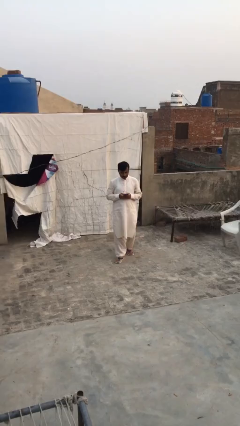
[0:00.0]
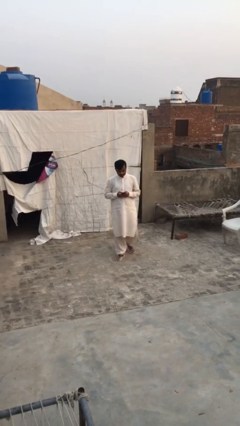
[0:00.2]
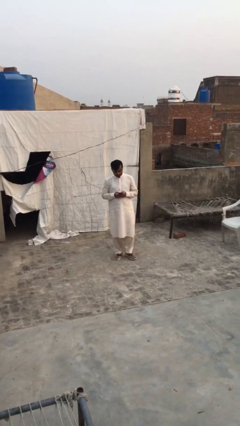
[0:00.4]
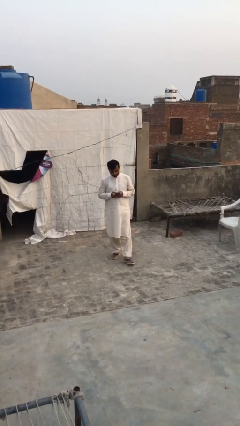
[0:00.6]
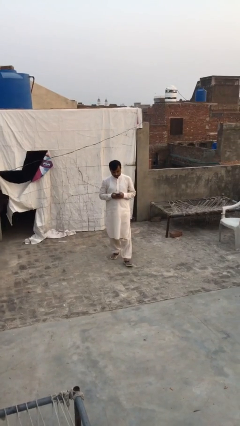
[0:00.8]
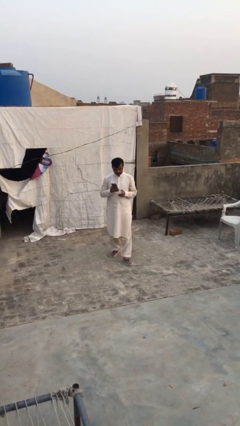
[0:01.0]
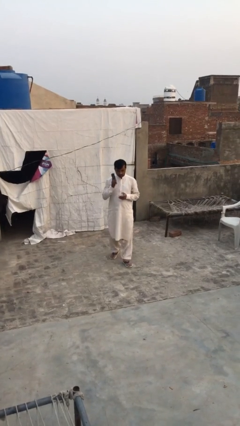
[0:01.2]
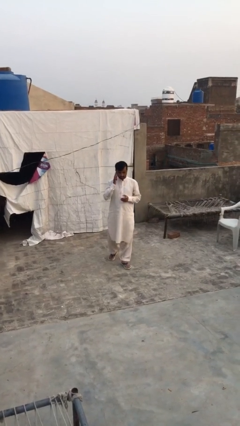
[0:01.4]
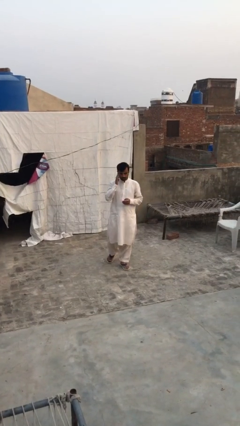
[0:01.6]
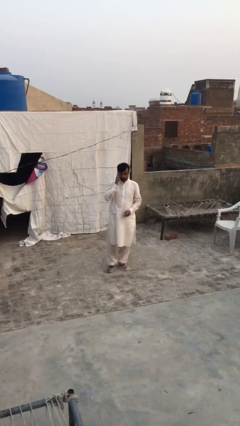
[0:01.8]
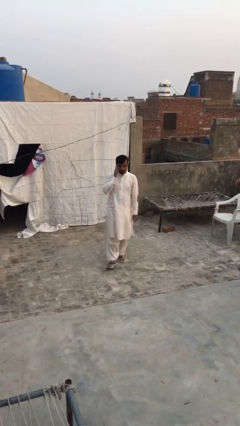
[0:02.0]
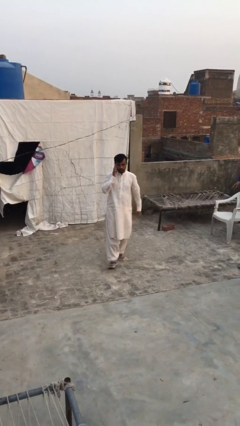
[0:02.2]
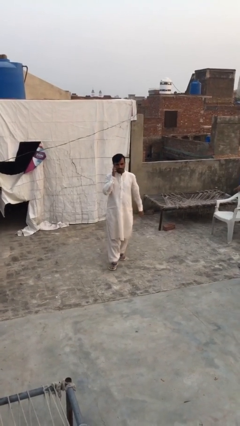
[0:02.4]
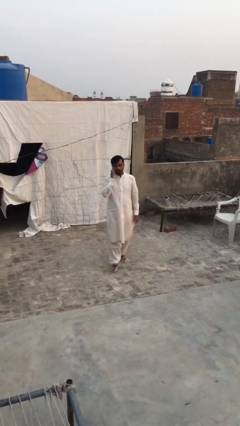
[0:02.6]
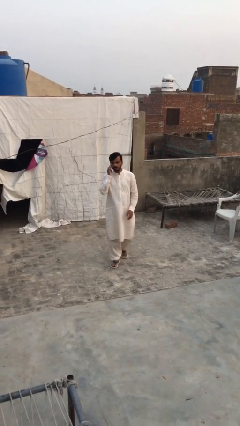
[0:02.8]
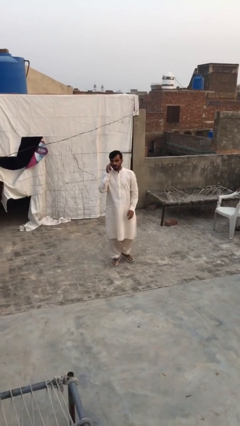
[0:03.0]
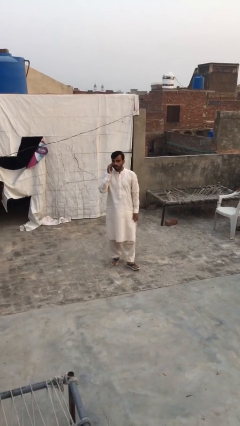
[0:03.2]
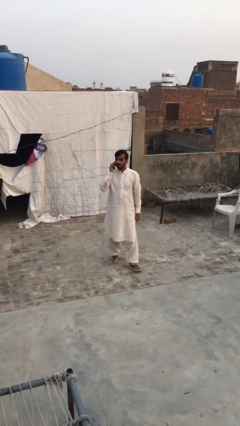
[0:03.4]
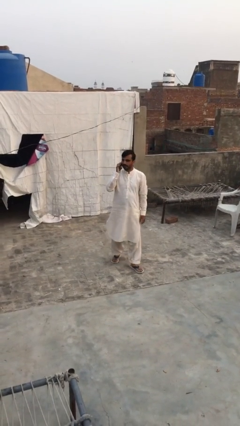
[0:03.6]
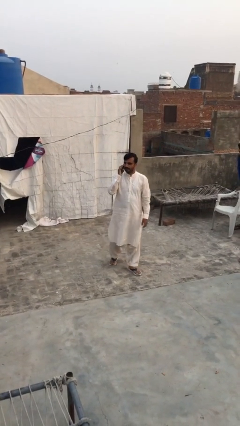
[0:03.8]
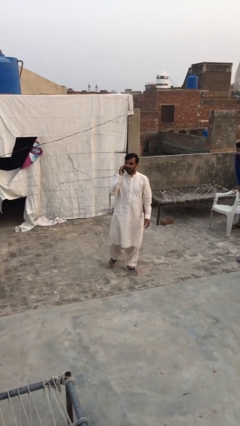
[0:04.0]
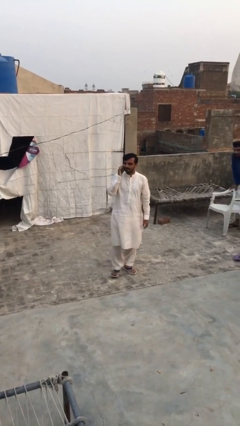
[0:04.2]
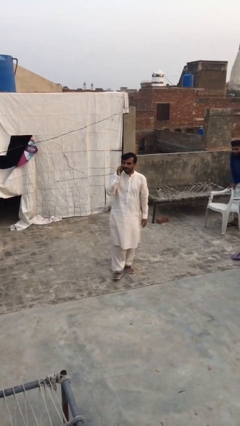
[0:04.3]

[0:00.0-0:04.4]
person talks on phone

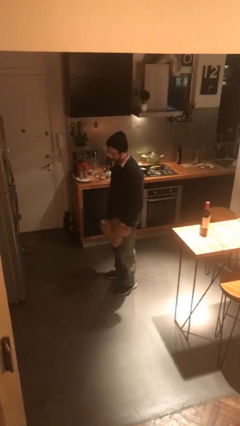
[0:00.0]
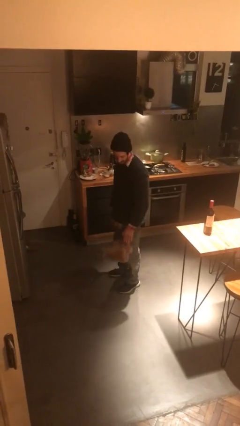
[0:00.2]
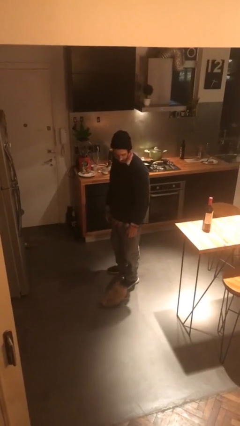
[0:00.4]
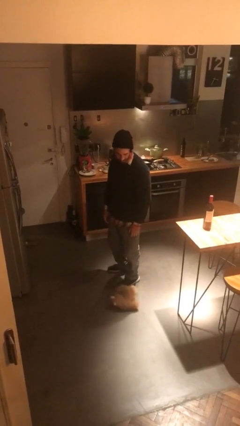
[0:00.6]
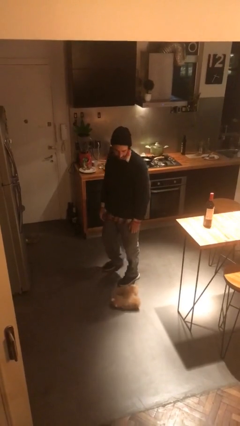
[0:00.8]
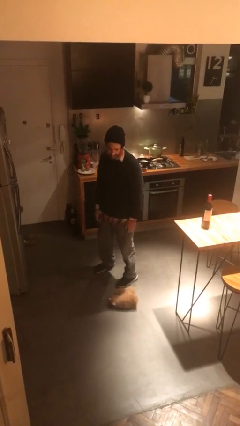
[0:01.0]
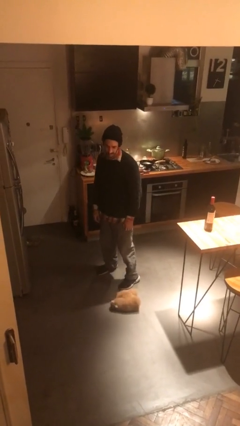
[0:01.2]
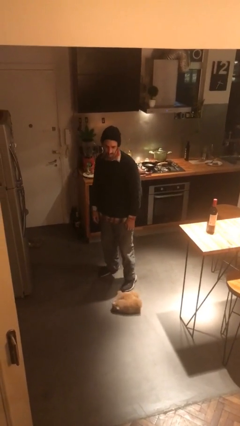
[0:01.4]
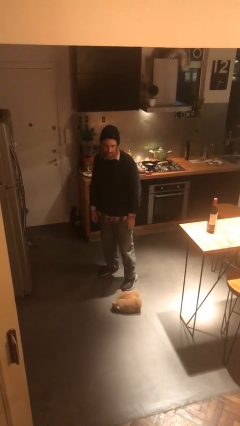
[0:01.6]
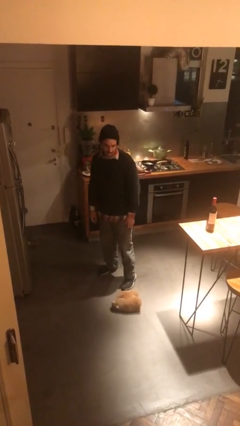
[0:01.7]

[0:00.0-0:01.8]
person drops object

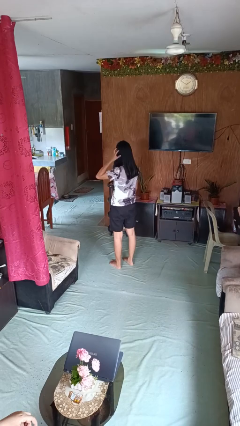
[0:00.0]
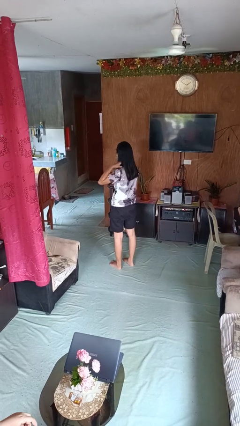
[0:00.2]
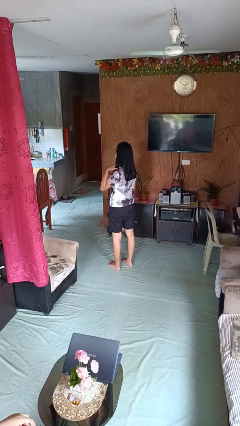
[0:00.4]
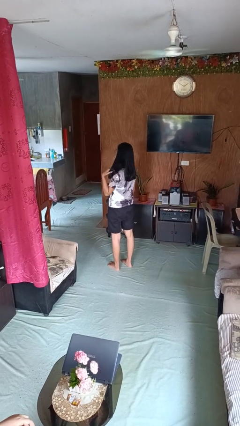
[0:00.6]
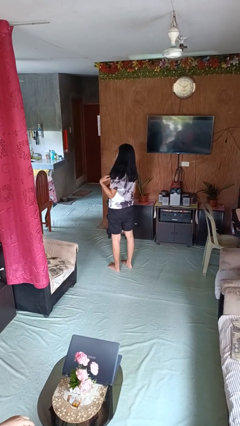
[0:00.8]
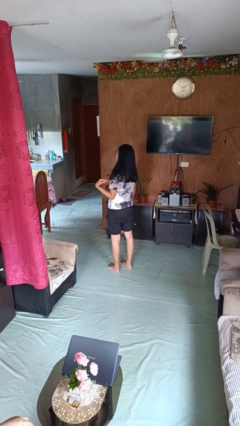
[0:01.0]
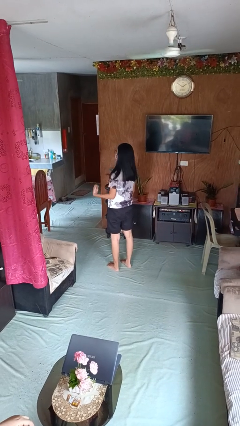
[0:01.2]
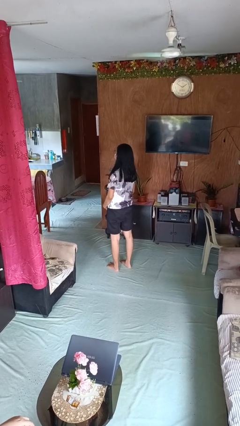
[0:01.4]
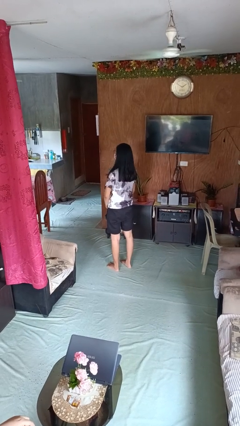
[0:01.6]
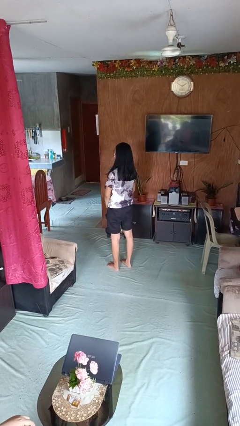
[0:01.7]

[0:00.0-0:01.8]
person strokes hair

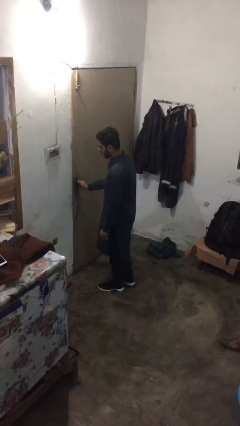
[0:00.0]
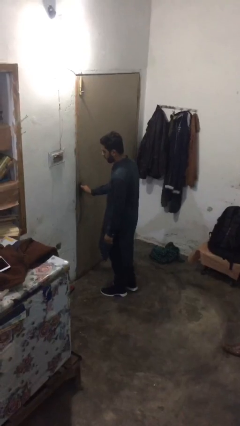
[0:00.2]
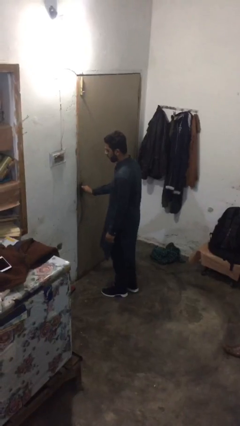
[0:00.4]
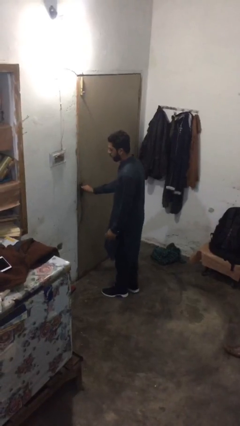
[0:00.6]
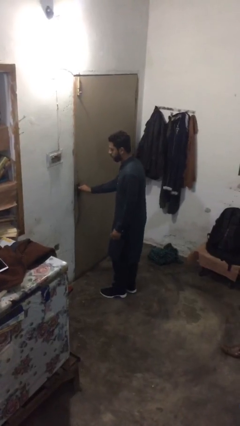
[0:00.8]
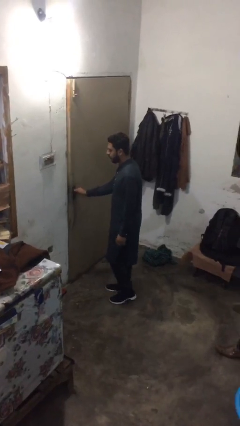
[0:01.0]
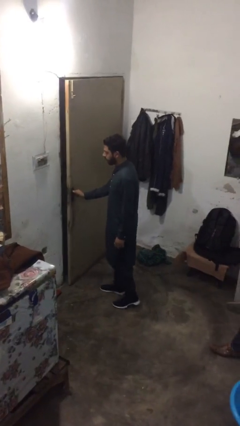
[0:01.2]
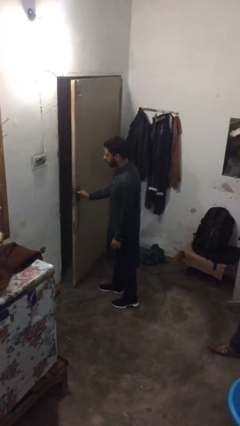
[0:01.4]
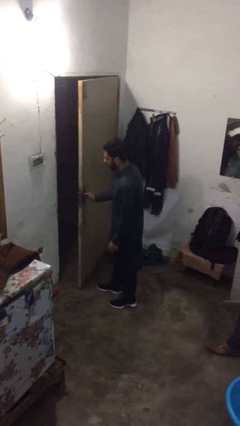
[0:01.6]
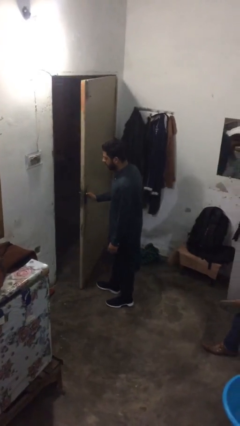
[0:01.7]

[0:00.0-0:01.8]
person opens facility door

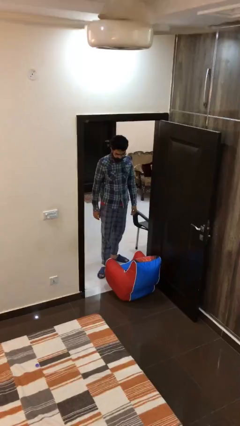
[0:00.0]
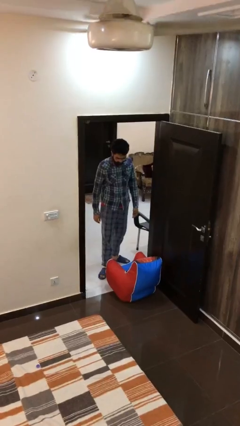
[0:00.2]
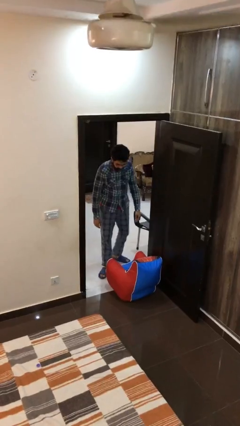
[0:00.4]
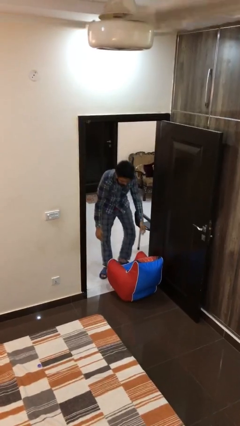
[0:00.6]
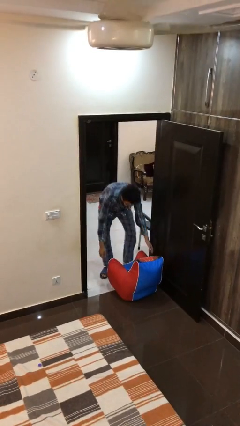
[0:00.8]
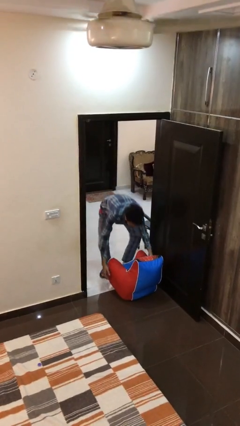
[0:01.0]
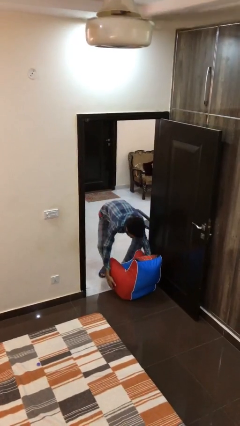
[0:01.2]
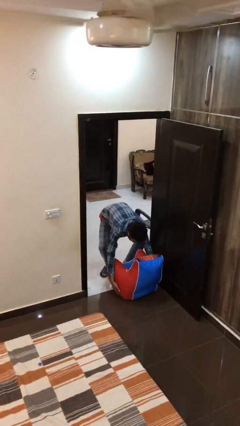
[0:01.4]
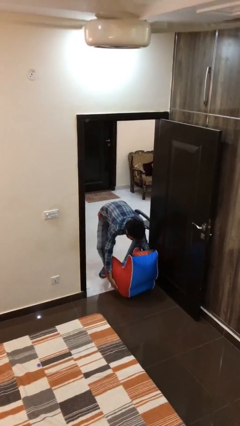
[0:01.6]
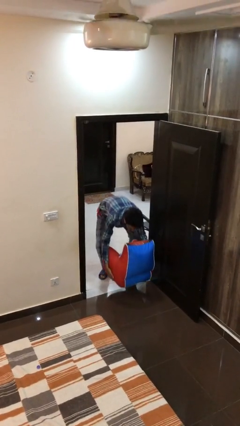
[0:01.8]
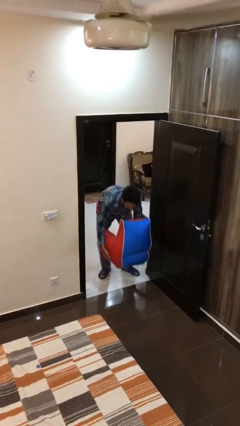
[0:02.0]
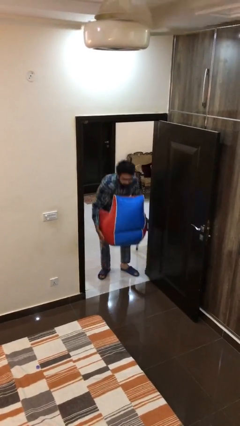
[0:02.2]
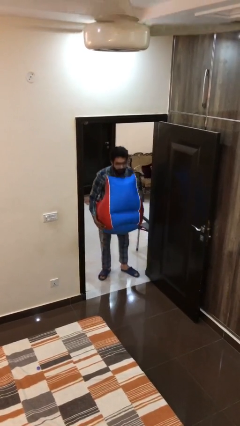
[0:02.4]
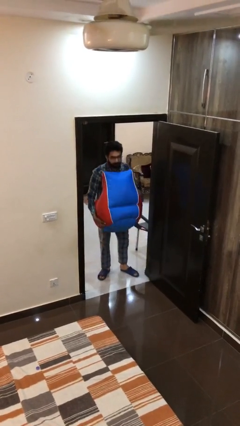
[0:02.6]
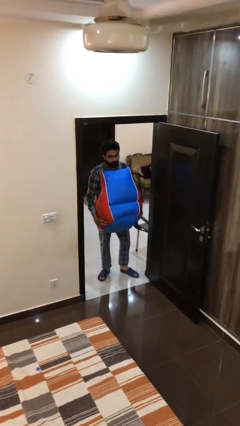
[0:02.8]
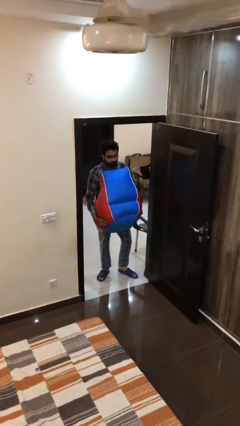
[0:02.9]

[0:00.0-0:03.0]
person picks up object from floor

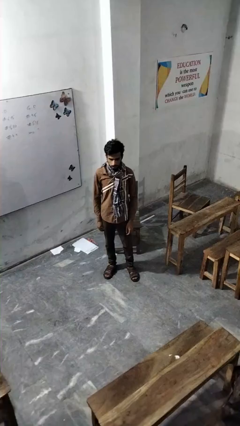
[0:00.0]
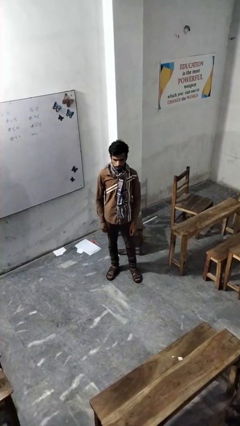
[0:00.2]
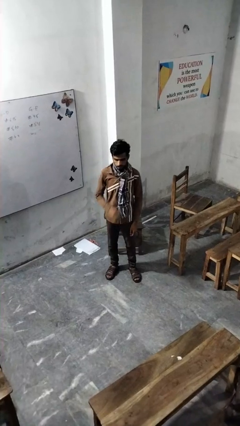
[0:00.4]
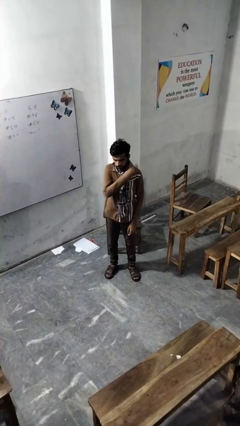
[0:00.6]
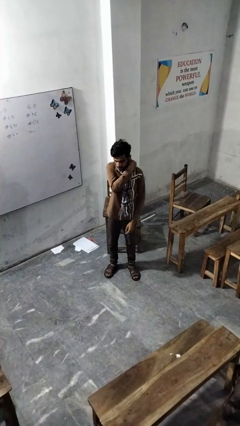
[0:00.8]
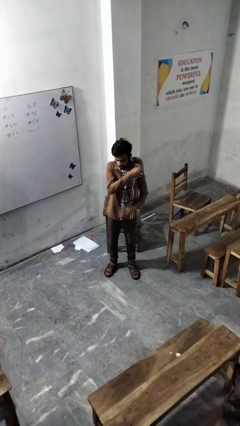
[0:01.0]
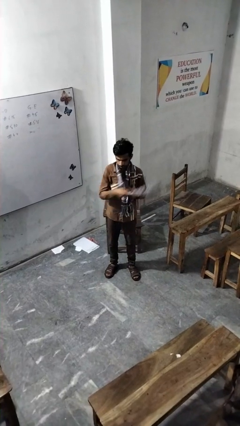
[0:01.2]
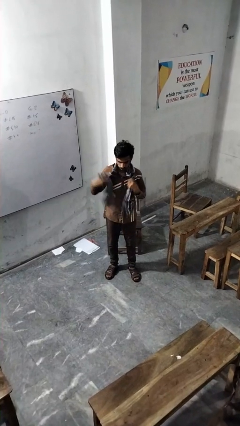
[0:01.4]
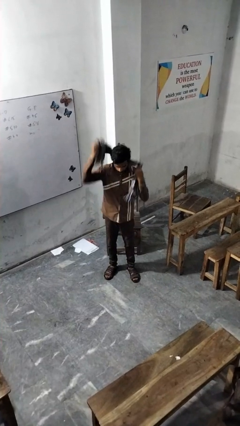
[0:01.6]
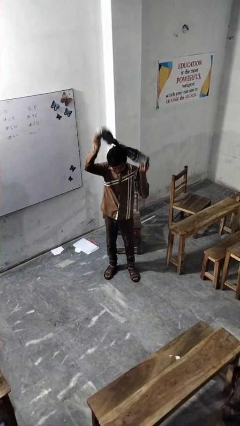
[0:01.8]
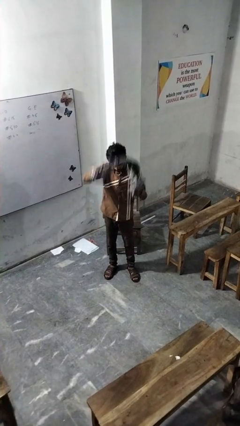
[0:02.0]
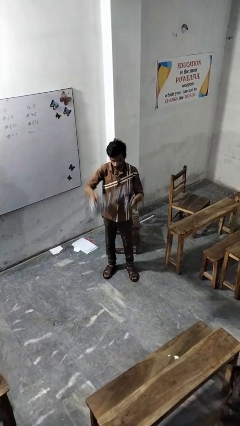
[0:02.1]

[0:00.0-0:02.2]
person takes off scarf

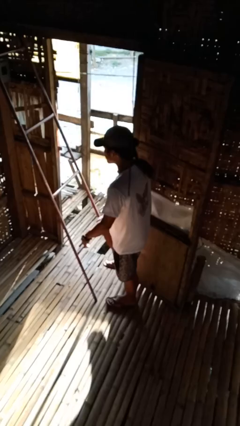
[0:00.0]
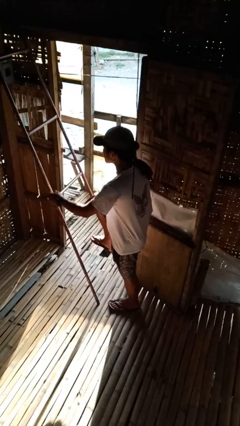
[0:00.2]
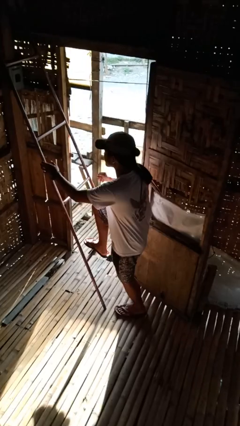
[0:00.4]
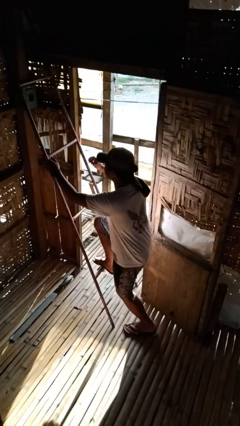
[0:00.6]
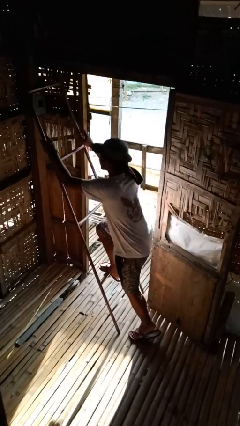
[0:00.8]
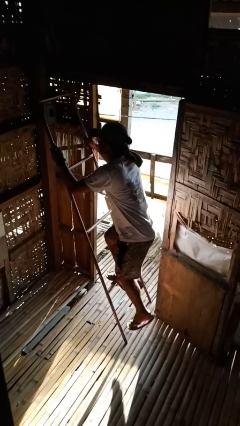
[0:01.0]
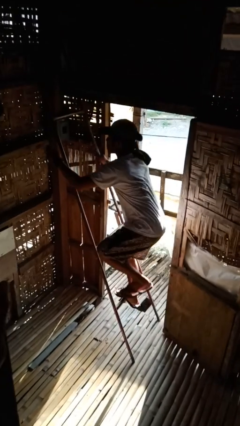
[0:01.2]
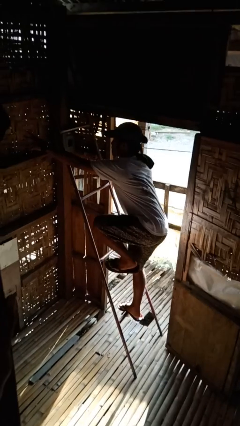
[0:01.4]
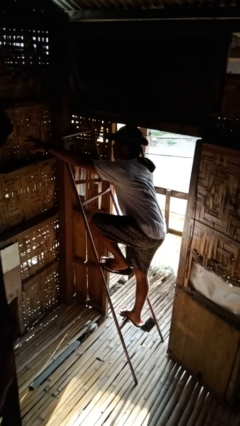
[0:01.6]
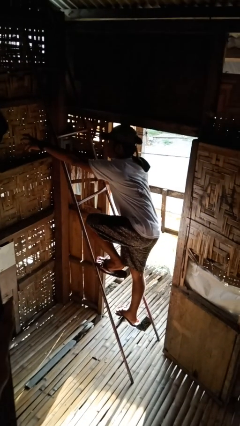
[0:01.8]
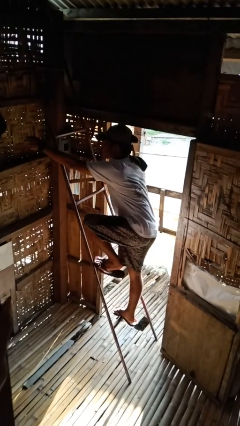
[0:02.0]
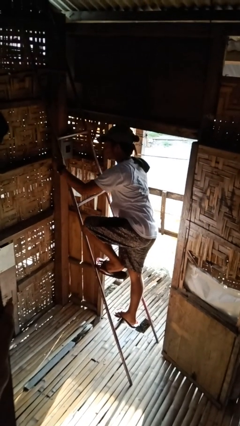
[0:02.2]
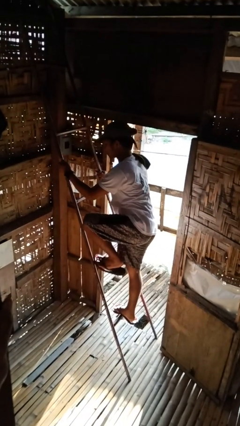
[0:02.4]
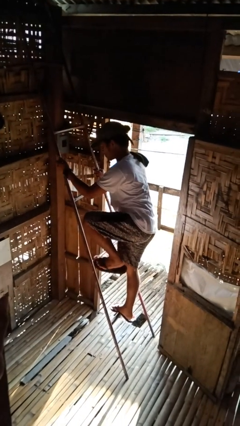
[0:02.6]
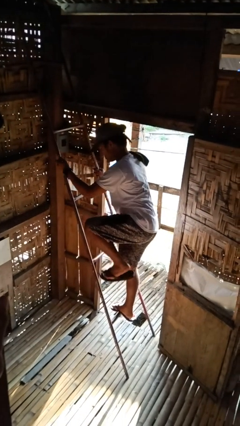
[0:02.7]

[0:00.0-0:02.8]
person climbs up ladder
